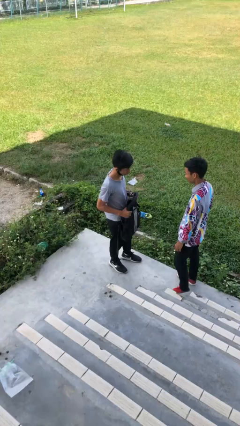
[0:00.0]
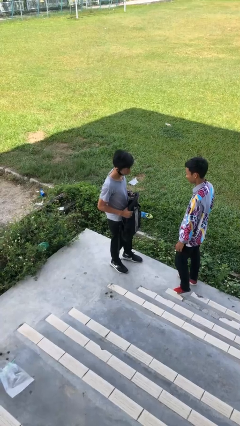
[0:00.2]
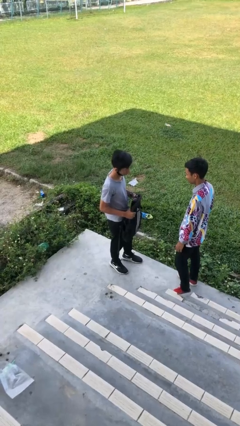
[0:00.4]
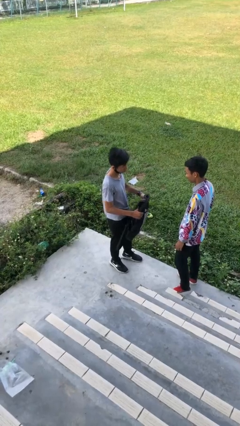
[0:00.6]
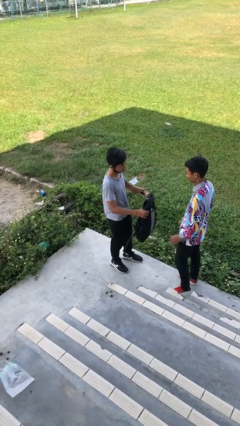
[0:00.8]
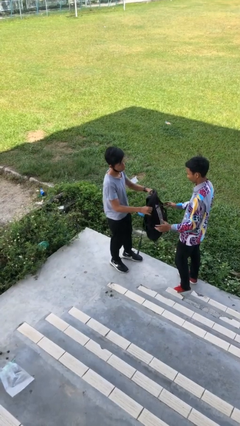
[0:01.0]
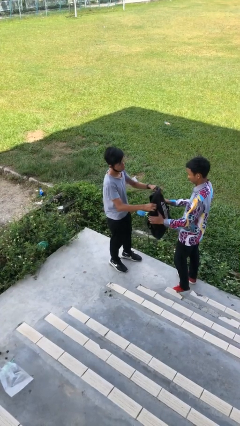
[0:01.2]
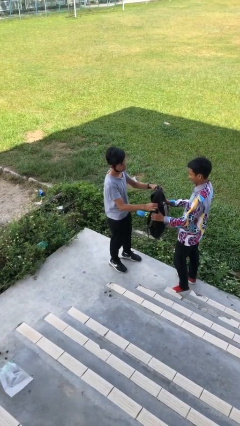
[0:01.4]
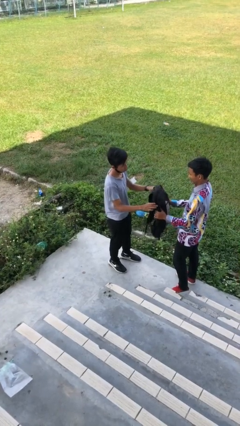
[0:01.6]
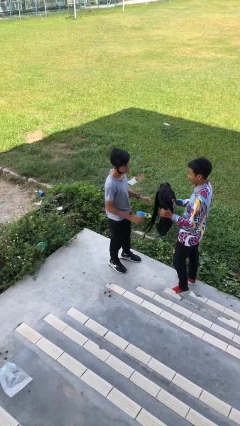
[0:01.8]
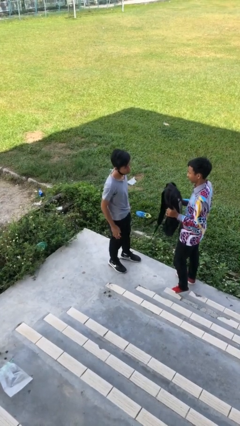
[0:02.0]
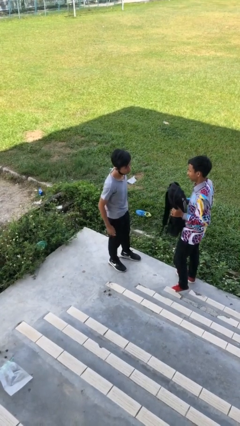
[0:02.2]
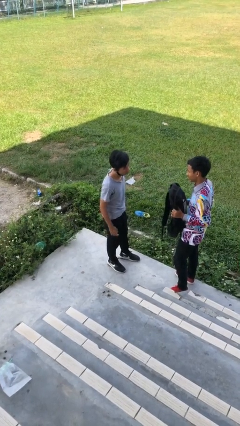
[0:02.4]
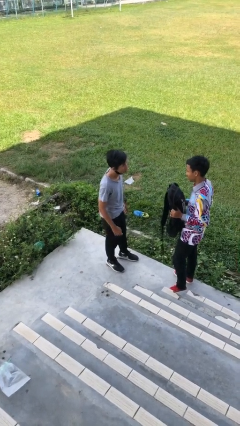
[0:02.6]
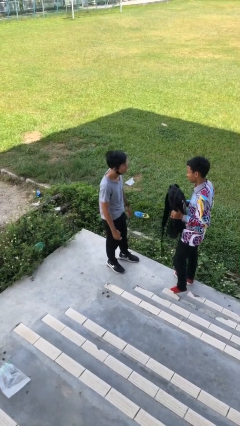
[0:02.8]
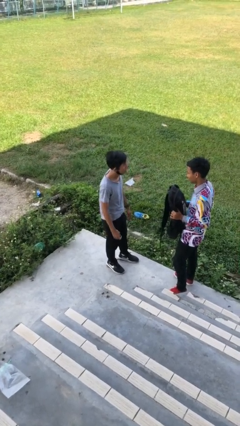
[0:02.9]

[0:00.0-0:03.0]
person transfers object to person

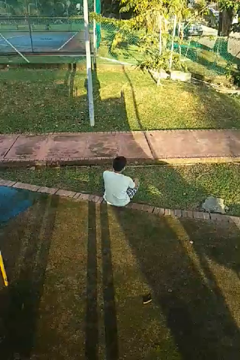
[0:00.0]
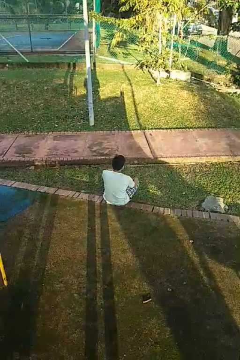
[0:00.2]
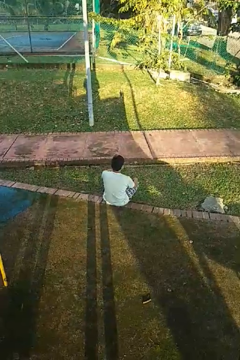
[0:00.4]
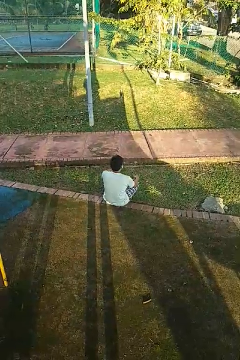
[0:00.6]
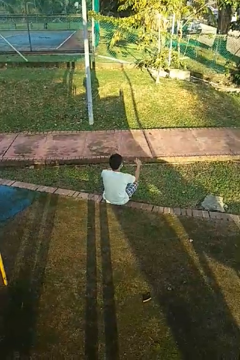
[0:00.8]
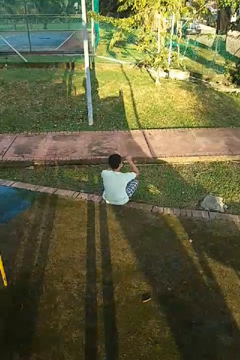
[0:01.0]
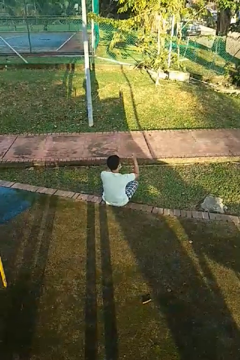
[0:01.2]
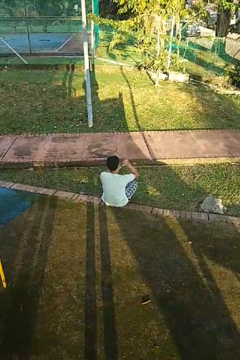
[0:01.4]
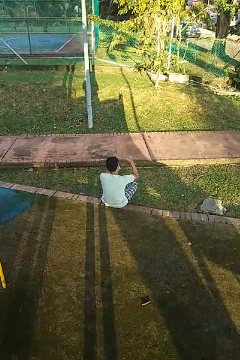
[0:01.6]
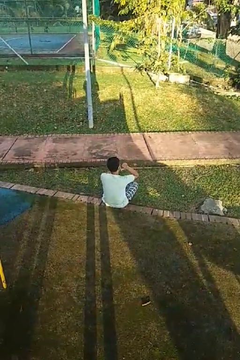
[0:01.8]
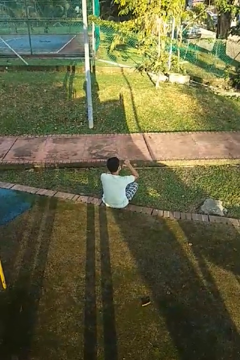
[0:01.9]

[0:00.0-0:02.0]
person gestures behind me

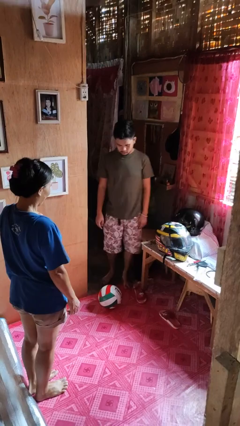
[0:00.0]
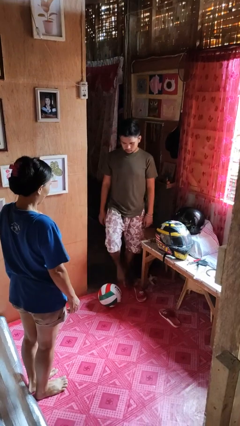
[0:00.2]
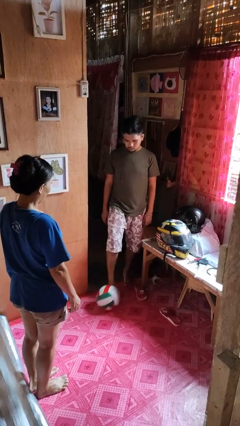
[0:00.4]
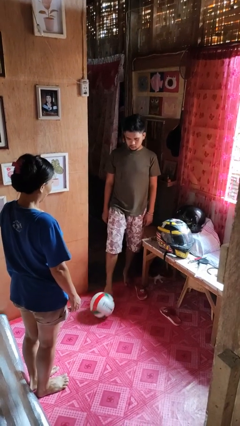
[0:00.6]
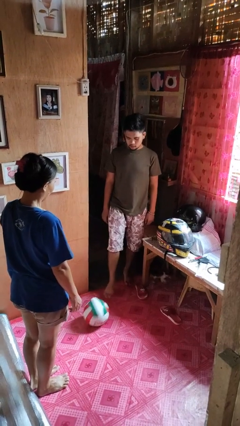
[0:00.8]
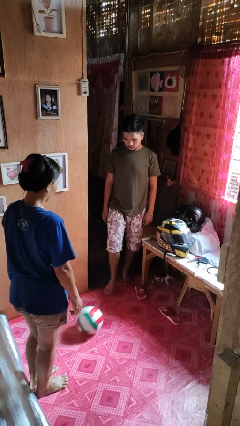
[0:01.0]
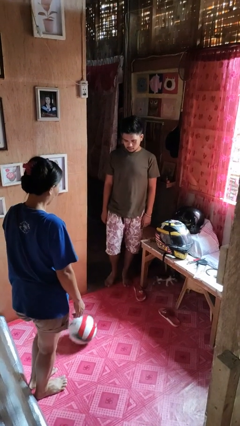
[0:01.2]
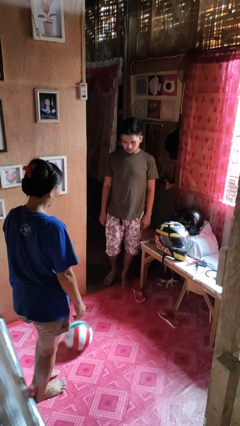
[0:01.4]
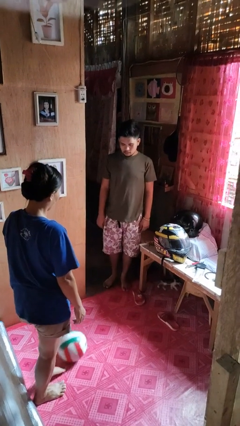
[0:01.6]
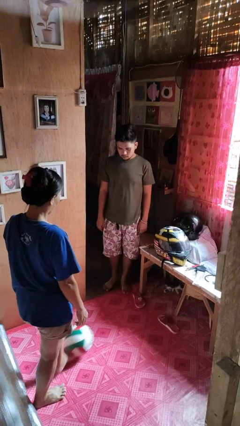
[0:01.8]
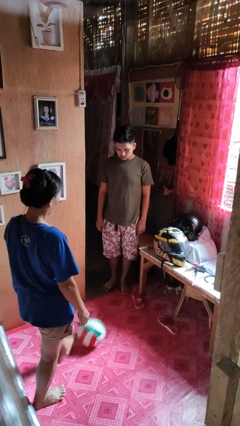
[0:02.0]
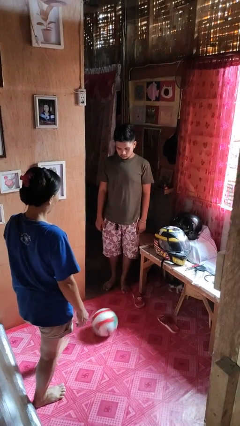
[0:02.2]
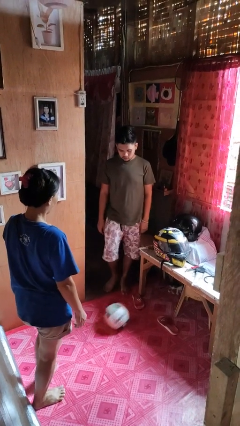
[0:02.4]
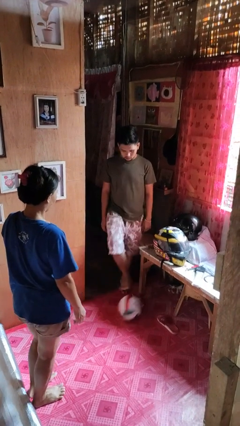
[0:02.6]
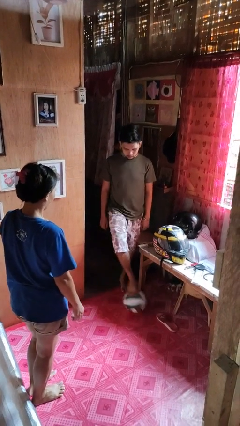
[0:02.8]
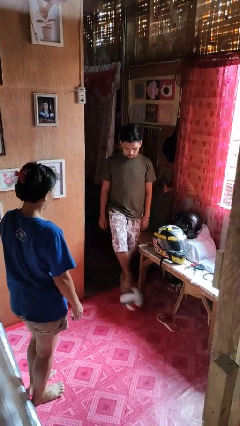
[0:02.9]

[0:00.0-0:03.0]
person kicks object to person

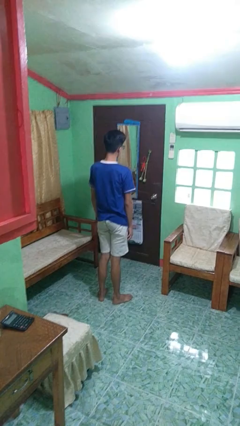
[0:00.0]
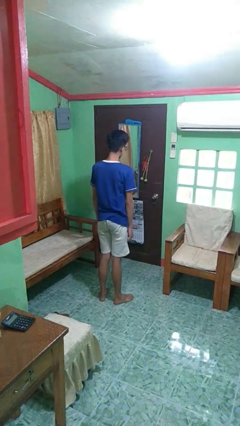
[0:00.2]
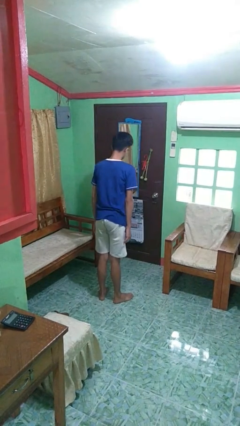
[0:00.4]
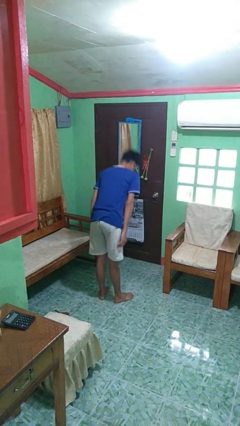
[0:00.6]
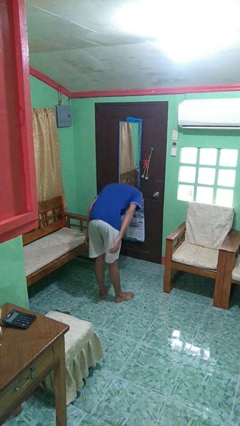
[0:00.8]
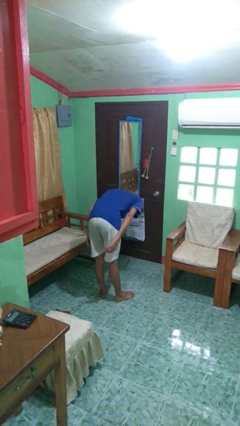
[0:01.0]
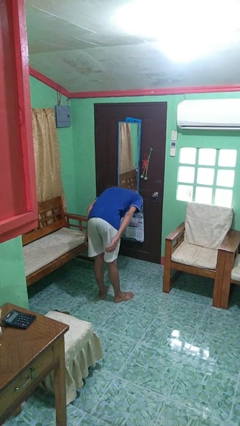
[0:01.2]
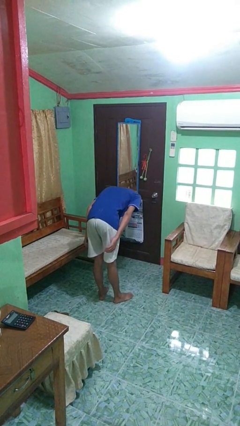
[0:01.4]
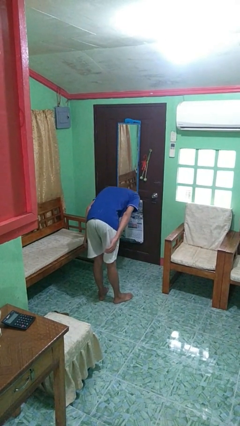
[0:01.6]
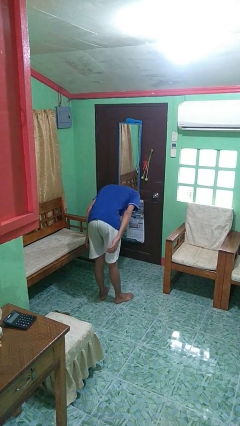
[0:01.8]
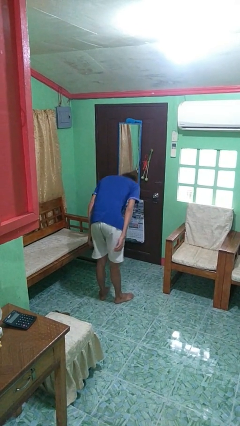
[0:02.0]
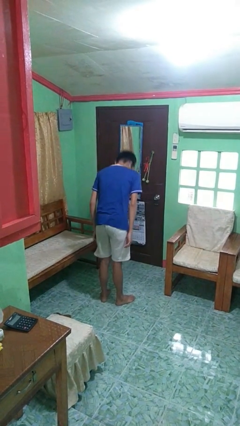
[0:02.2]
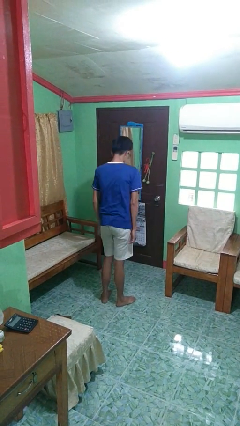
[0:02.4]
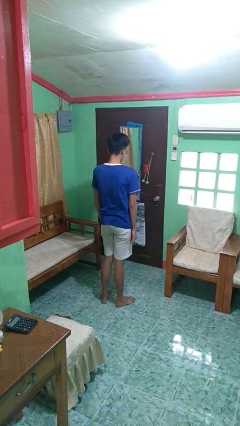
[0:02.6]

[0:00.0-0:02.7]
person bows

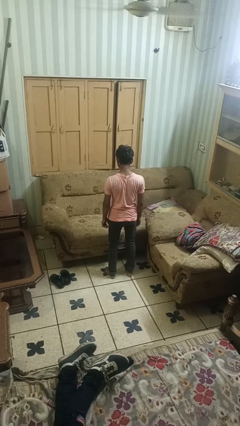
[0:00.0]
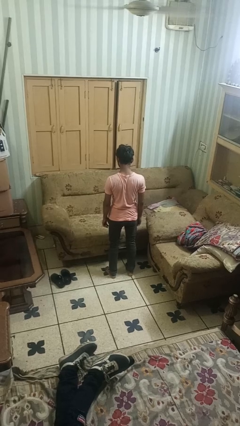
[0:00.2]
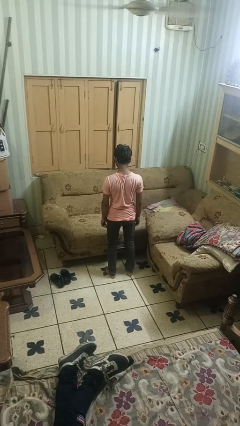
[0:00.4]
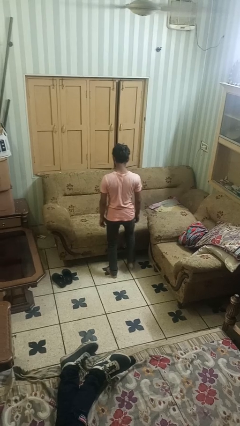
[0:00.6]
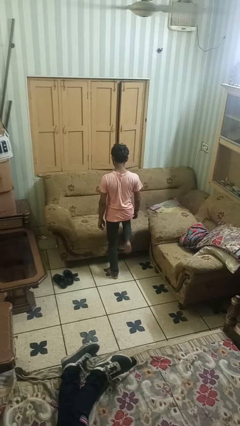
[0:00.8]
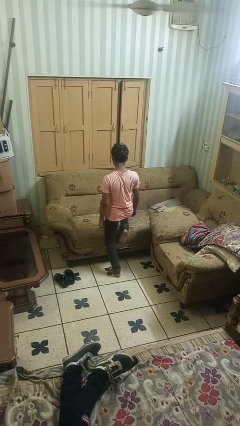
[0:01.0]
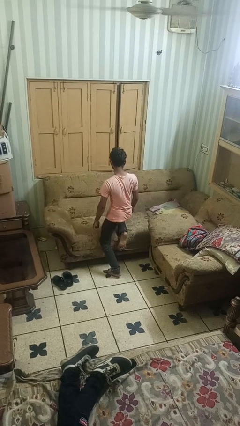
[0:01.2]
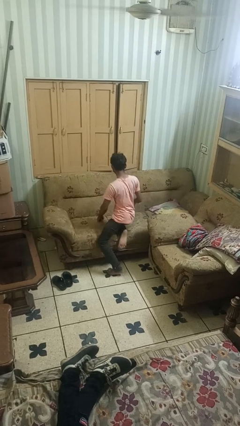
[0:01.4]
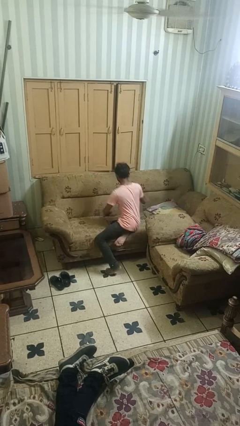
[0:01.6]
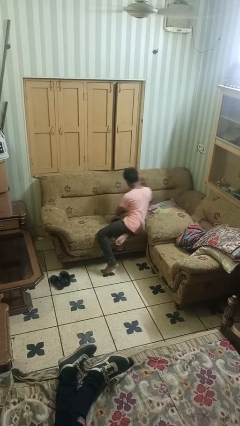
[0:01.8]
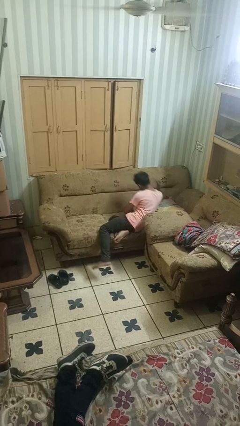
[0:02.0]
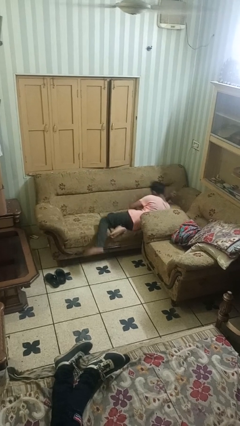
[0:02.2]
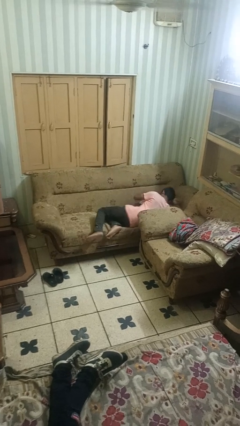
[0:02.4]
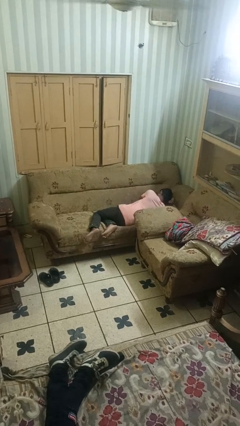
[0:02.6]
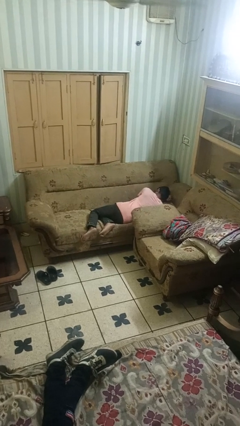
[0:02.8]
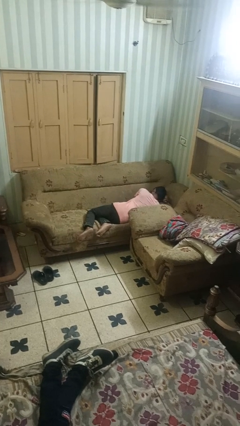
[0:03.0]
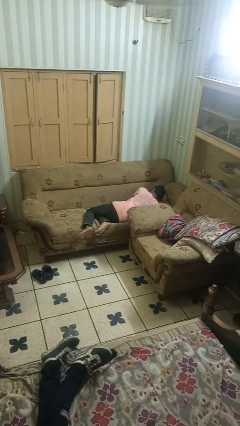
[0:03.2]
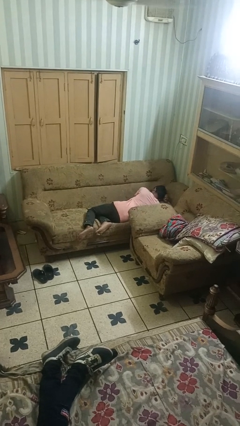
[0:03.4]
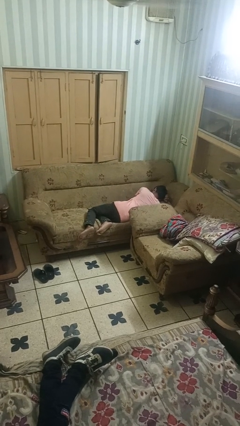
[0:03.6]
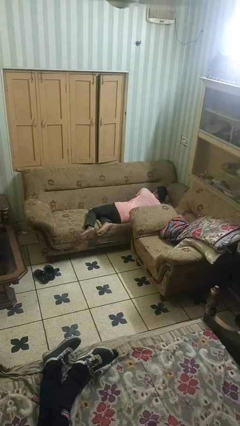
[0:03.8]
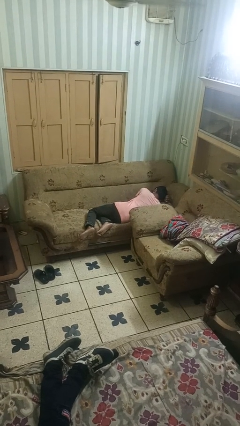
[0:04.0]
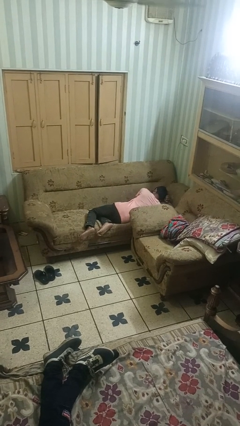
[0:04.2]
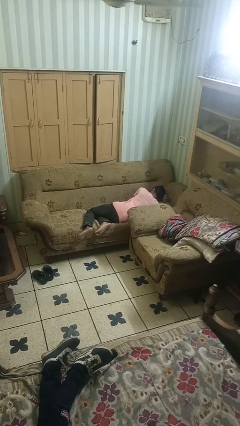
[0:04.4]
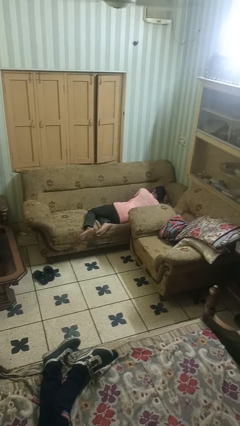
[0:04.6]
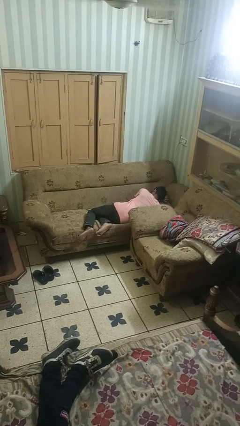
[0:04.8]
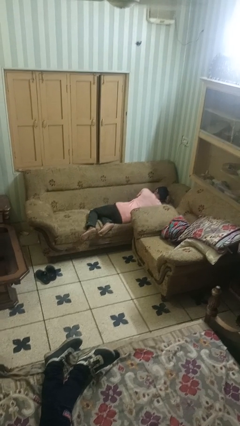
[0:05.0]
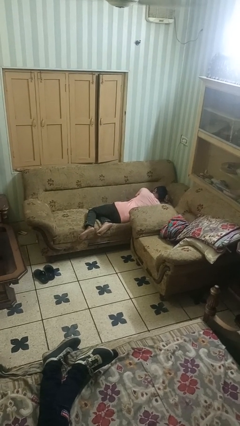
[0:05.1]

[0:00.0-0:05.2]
person lies down on couch

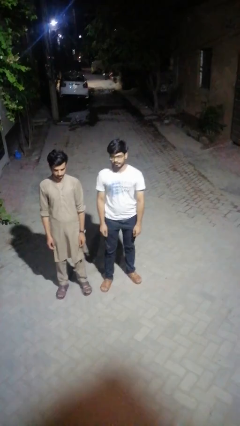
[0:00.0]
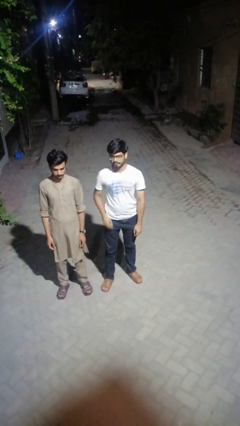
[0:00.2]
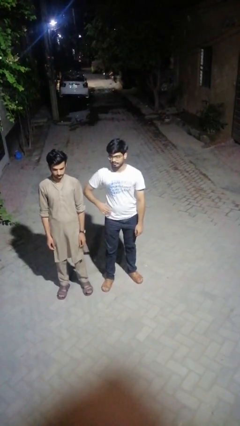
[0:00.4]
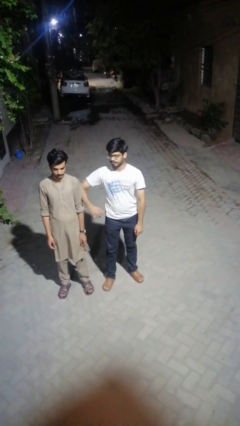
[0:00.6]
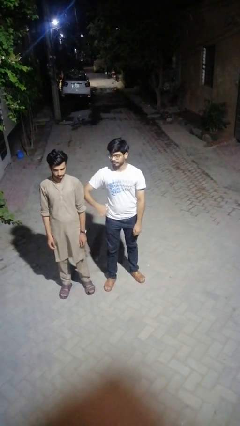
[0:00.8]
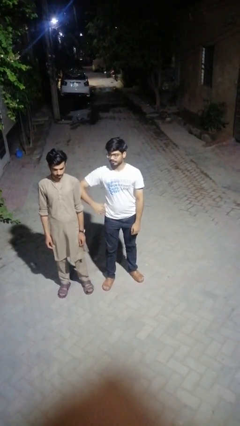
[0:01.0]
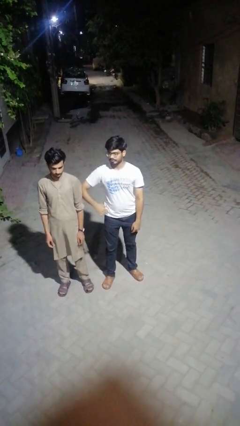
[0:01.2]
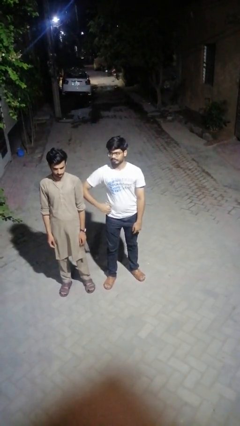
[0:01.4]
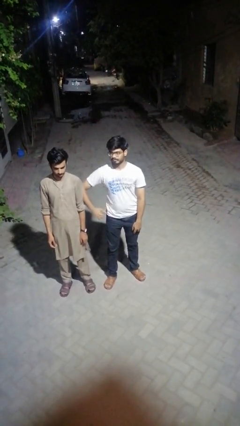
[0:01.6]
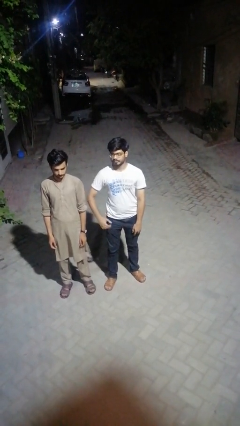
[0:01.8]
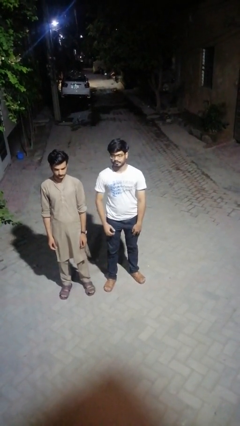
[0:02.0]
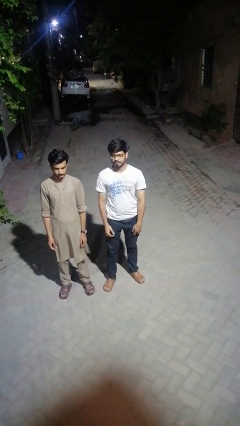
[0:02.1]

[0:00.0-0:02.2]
person nudges person with elbow
